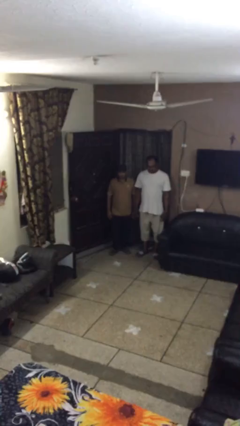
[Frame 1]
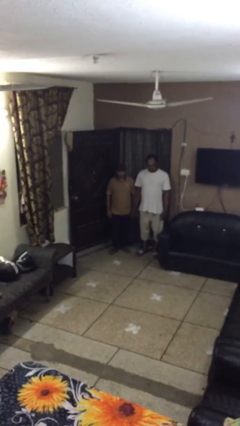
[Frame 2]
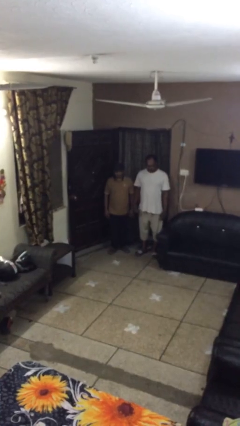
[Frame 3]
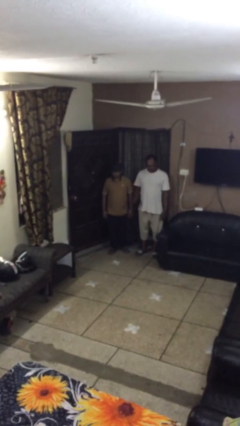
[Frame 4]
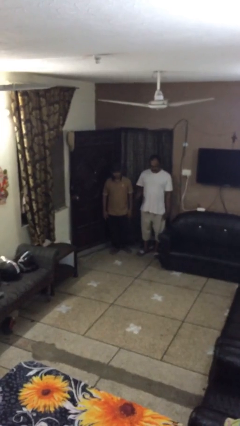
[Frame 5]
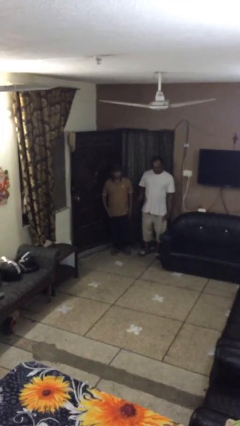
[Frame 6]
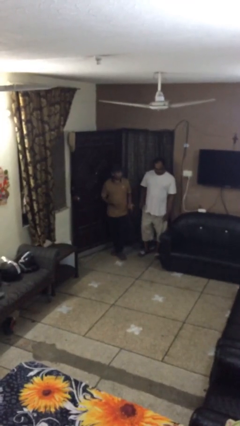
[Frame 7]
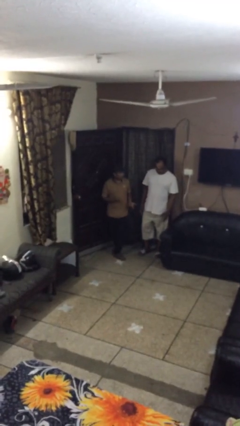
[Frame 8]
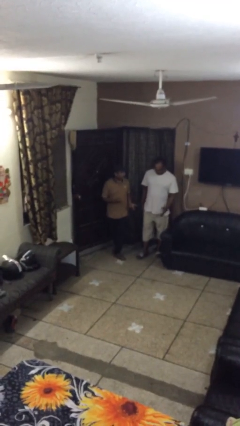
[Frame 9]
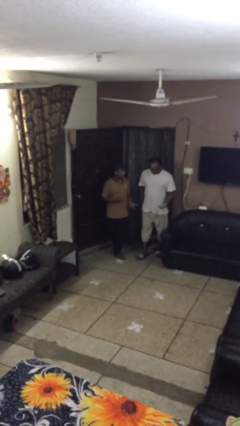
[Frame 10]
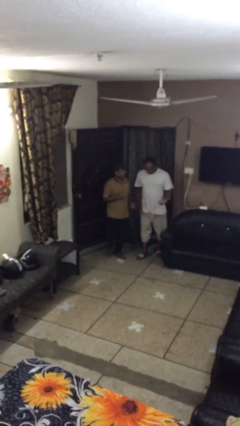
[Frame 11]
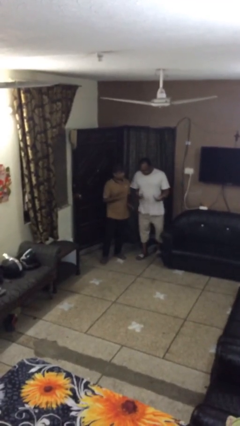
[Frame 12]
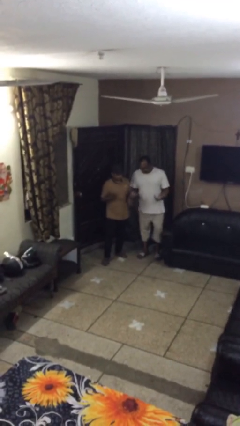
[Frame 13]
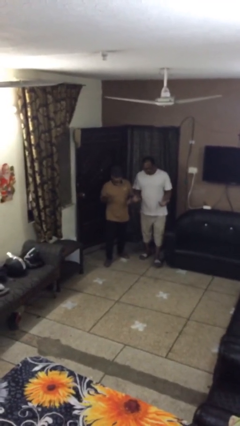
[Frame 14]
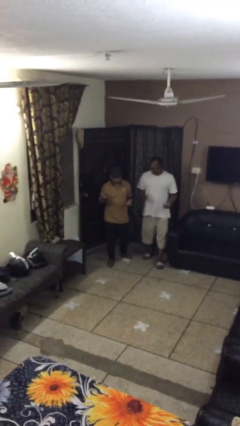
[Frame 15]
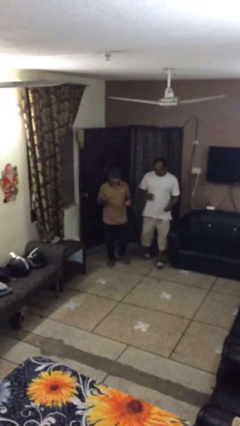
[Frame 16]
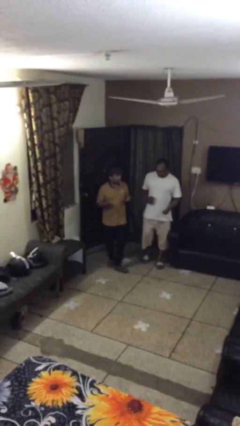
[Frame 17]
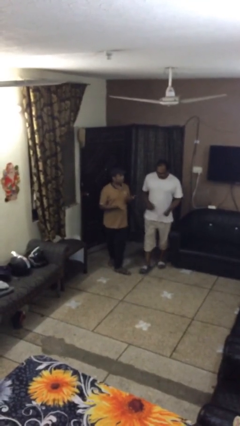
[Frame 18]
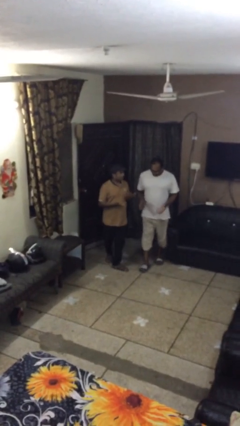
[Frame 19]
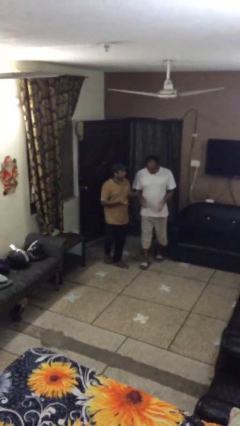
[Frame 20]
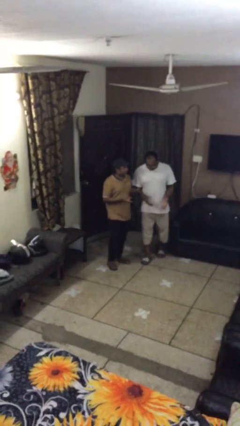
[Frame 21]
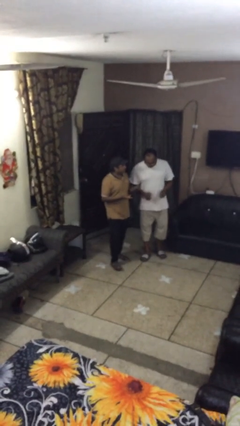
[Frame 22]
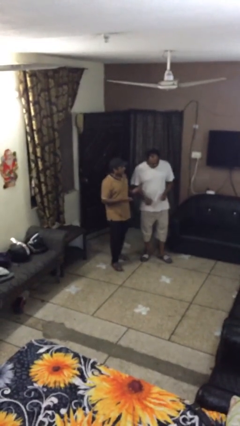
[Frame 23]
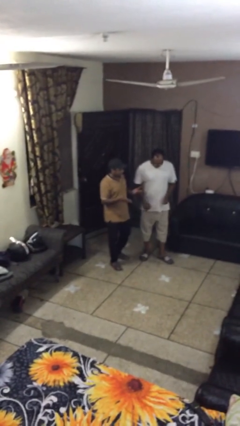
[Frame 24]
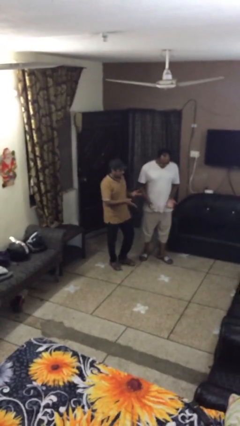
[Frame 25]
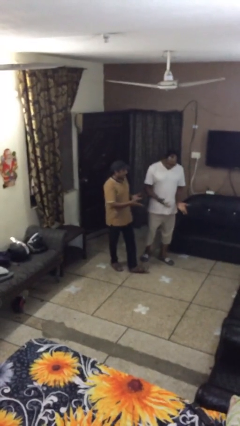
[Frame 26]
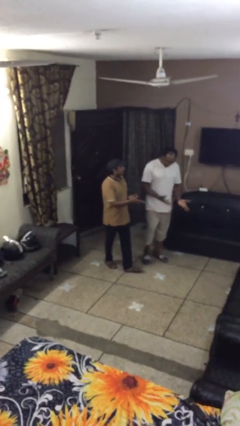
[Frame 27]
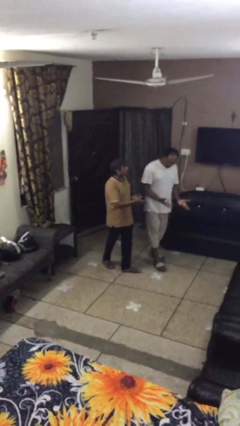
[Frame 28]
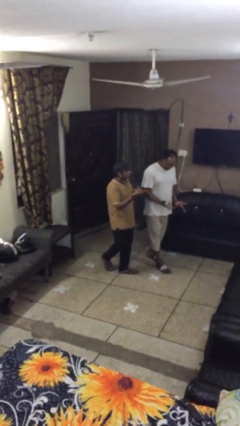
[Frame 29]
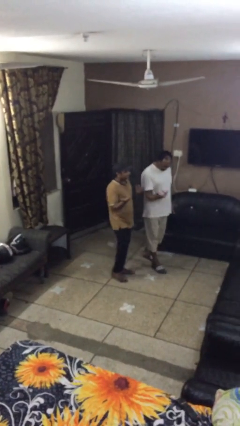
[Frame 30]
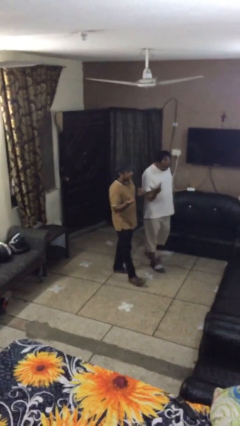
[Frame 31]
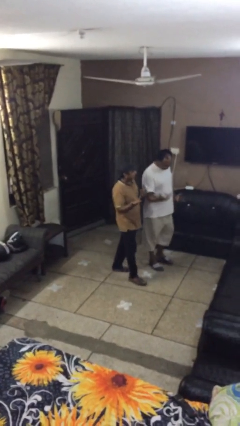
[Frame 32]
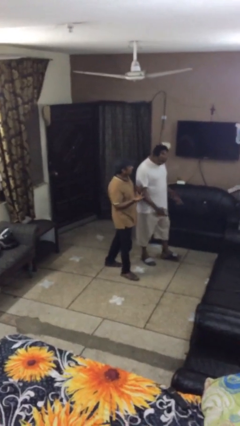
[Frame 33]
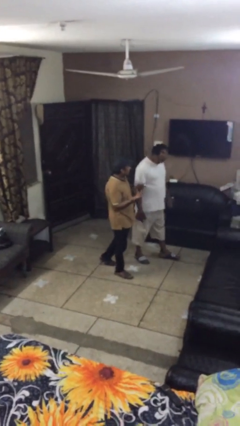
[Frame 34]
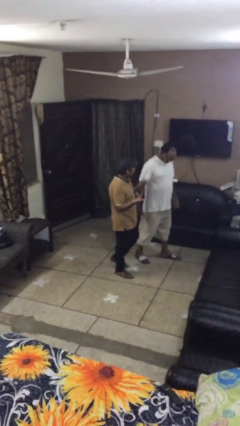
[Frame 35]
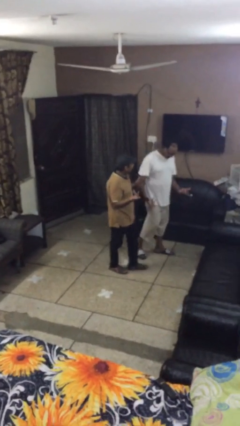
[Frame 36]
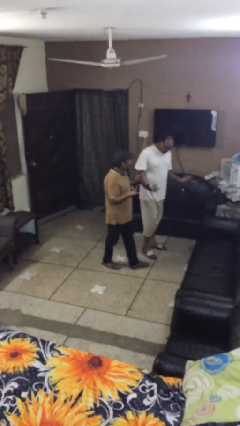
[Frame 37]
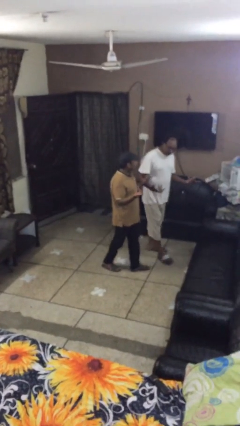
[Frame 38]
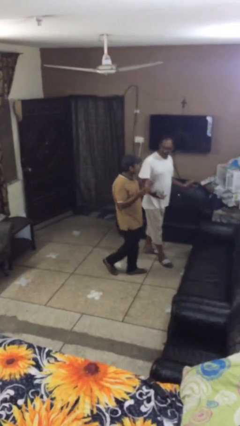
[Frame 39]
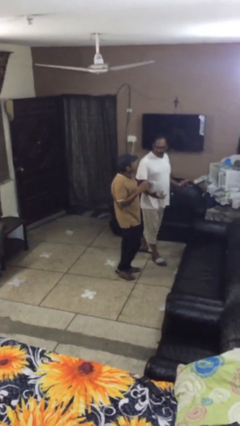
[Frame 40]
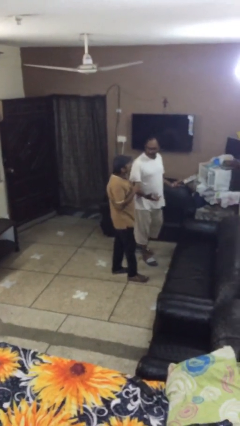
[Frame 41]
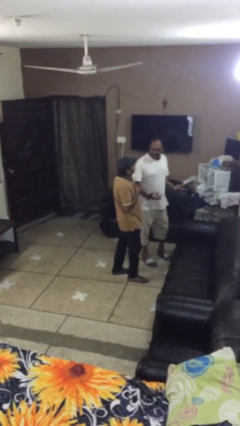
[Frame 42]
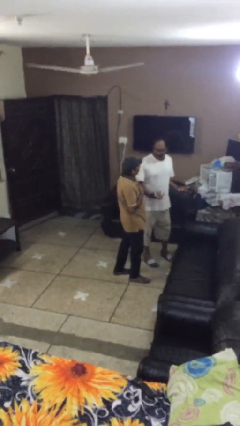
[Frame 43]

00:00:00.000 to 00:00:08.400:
person talks to person

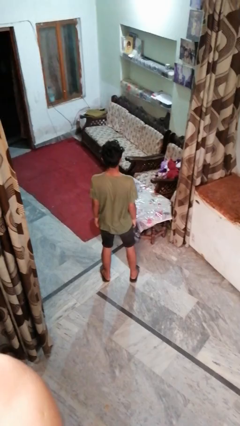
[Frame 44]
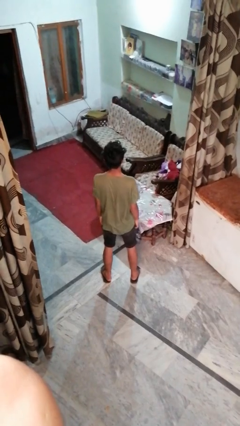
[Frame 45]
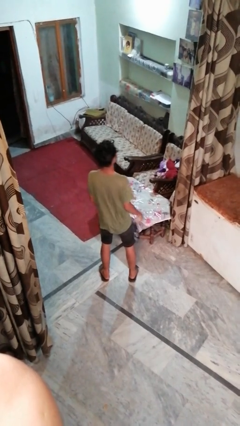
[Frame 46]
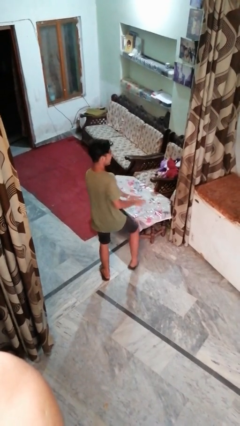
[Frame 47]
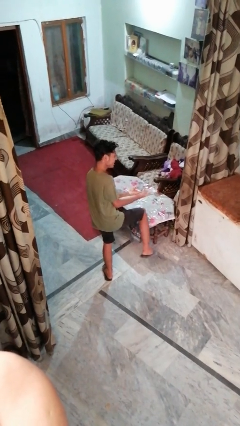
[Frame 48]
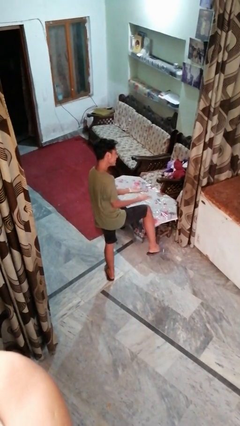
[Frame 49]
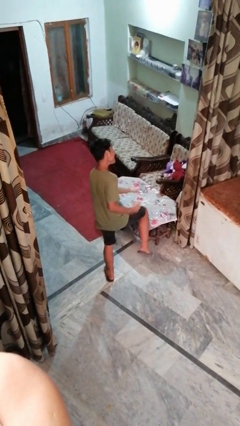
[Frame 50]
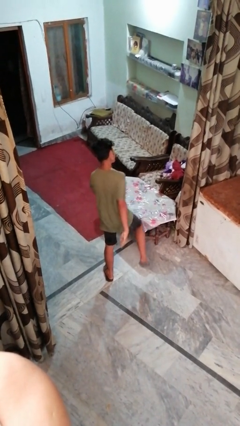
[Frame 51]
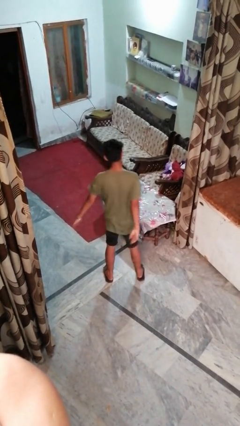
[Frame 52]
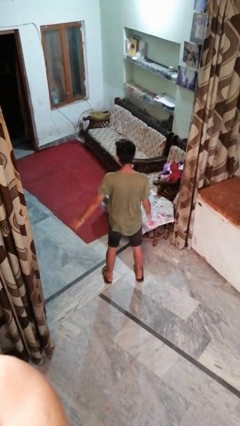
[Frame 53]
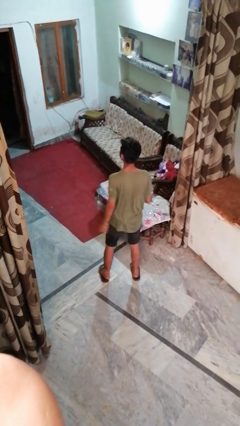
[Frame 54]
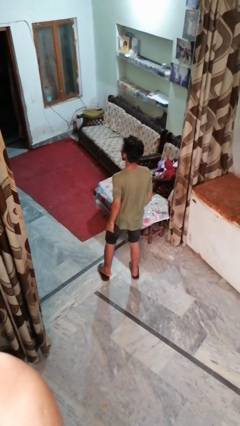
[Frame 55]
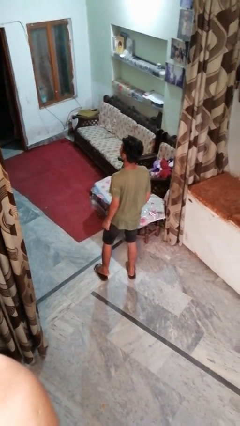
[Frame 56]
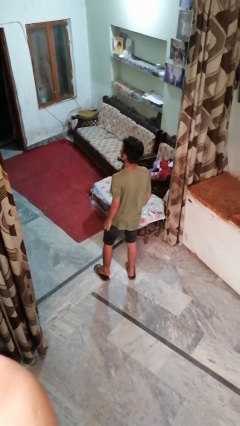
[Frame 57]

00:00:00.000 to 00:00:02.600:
person dances in place

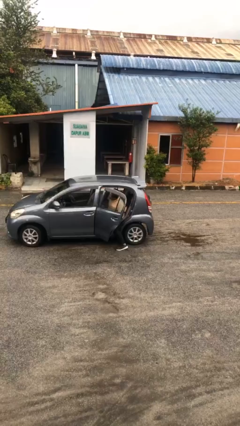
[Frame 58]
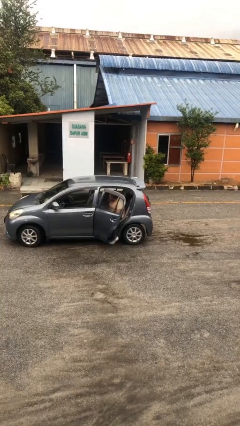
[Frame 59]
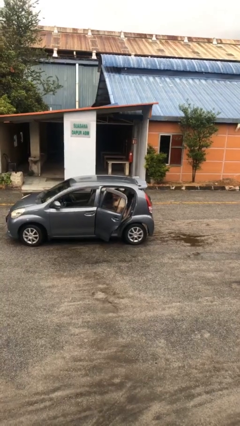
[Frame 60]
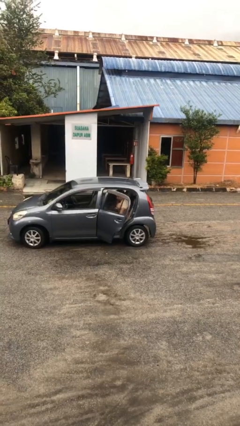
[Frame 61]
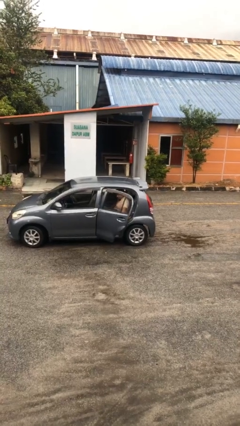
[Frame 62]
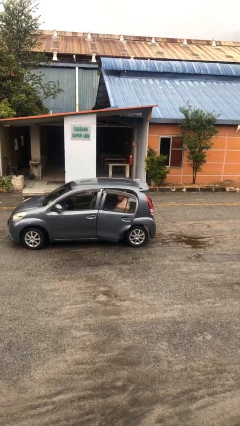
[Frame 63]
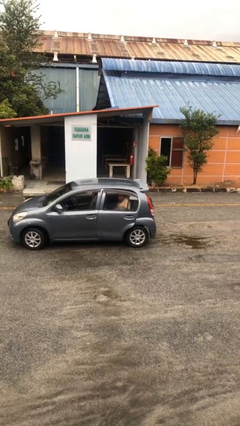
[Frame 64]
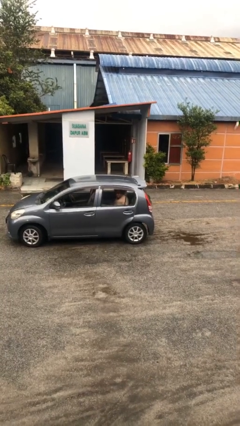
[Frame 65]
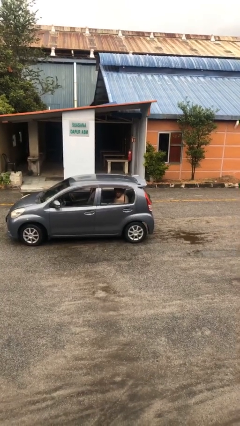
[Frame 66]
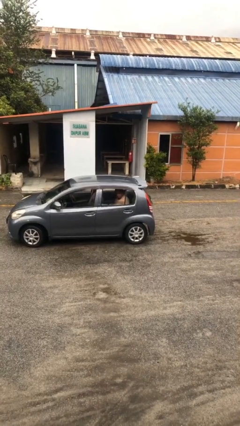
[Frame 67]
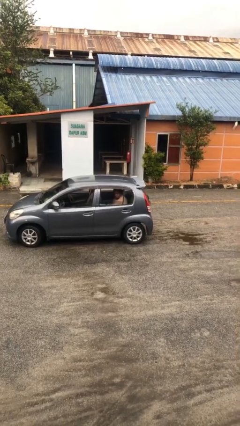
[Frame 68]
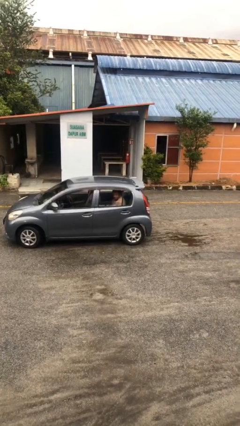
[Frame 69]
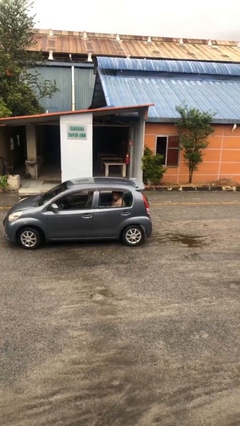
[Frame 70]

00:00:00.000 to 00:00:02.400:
person closes car door

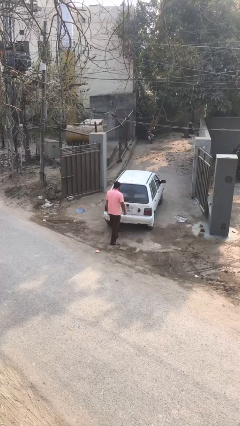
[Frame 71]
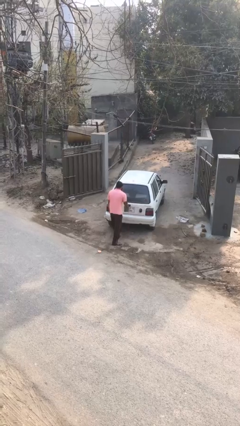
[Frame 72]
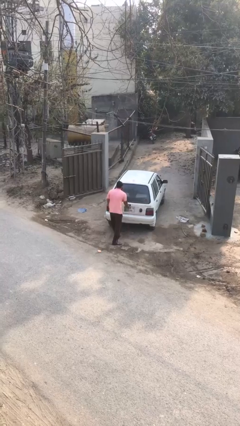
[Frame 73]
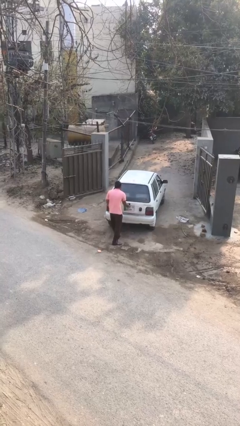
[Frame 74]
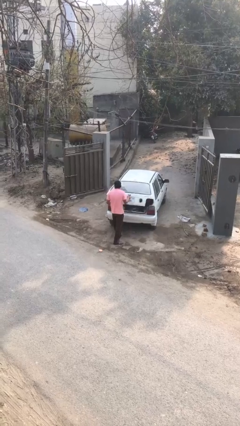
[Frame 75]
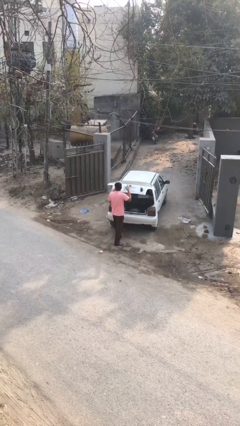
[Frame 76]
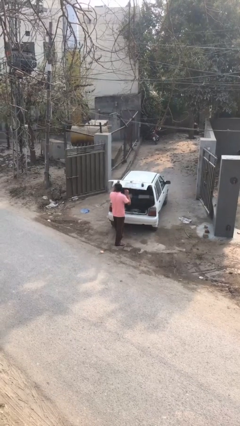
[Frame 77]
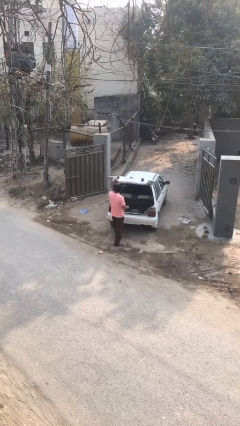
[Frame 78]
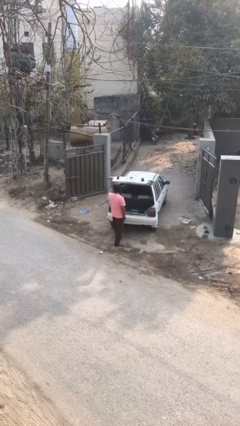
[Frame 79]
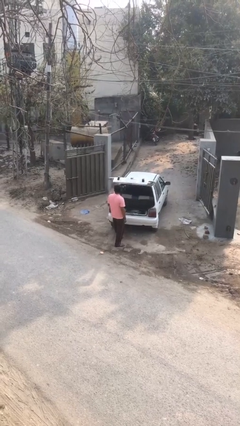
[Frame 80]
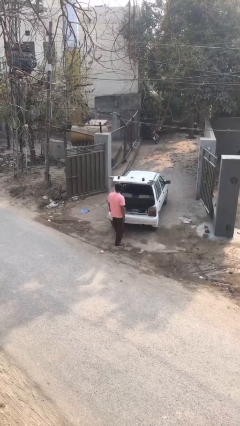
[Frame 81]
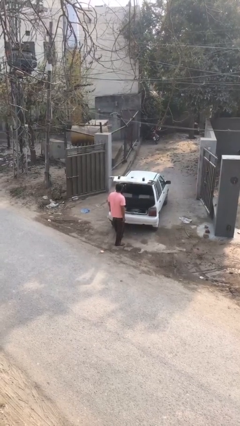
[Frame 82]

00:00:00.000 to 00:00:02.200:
person opens car trunk

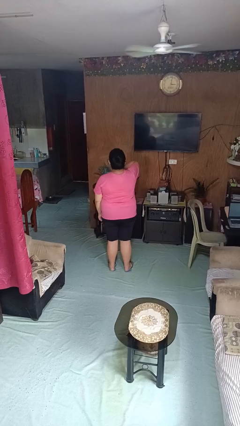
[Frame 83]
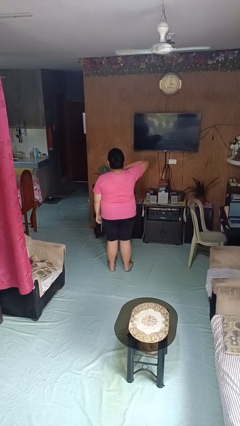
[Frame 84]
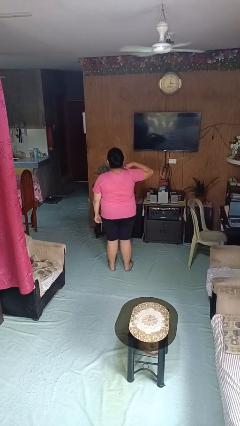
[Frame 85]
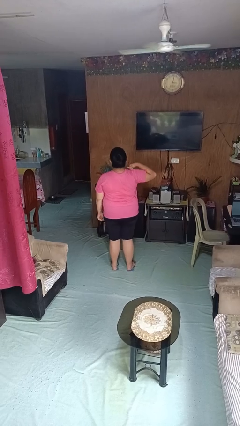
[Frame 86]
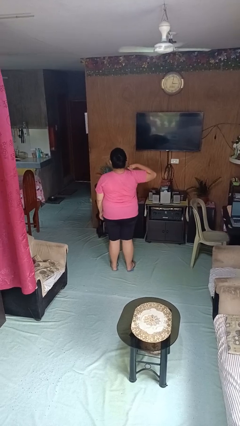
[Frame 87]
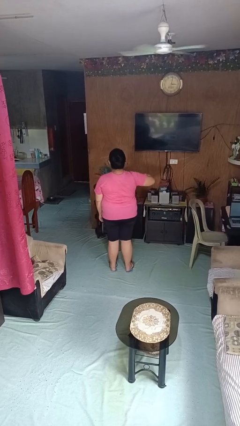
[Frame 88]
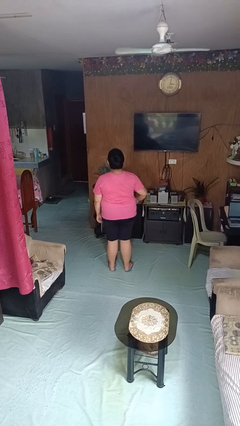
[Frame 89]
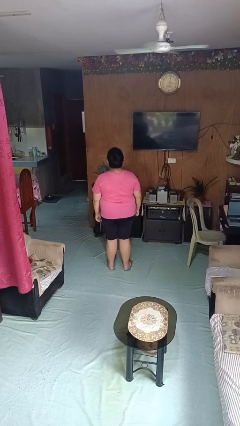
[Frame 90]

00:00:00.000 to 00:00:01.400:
person gestures cut

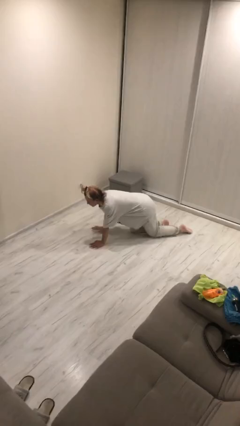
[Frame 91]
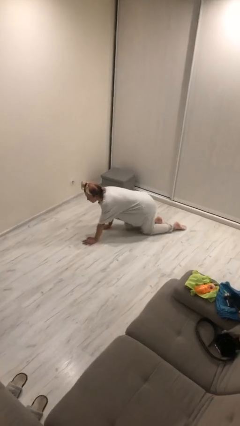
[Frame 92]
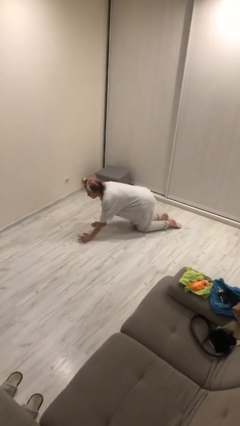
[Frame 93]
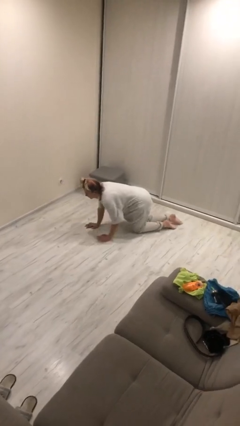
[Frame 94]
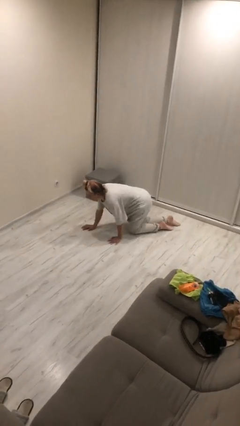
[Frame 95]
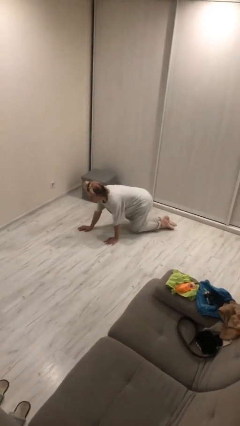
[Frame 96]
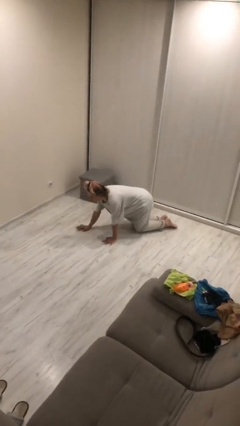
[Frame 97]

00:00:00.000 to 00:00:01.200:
person crawls
